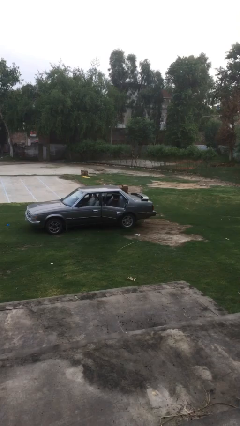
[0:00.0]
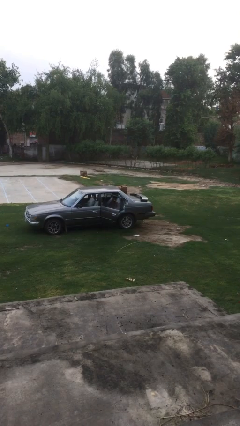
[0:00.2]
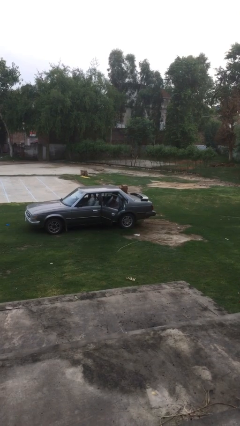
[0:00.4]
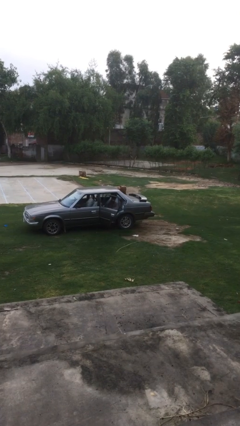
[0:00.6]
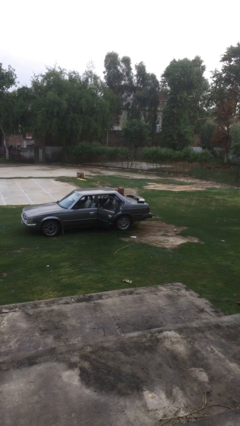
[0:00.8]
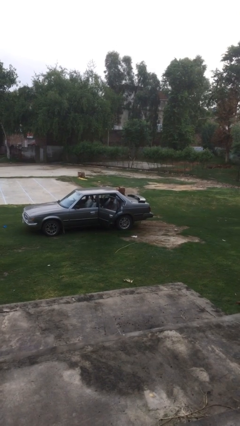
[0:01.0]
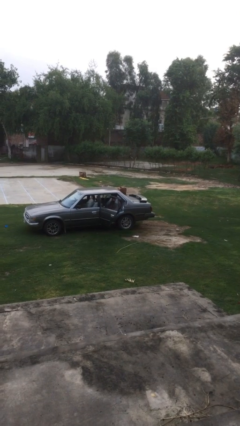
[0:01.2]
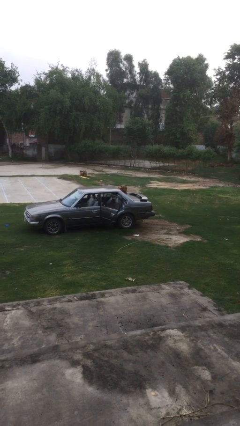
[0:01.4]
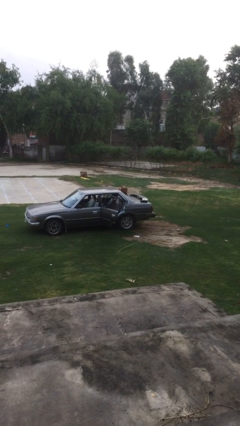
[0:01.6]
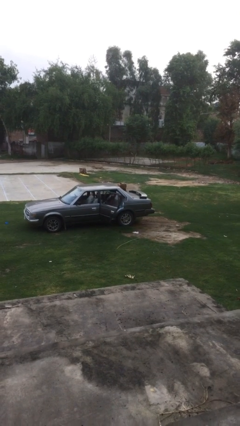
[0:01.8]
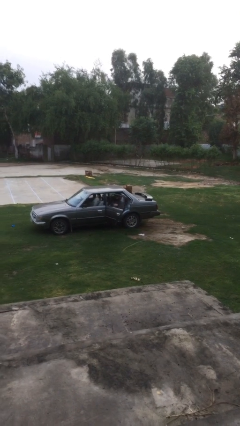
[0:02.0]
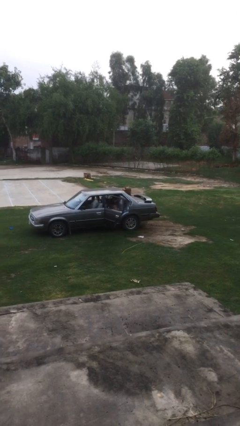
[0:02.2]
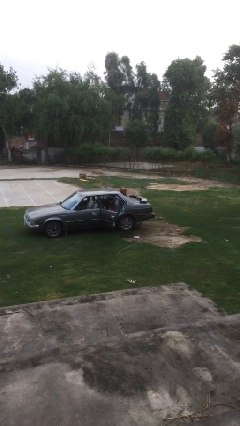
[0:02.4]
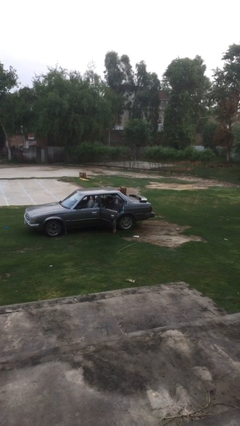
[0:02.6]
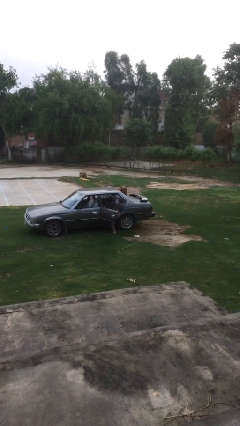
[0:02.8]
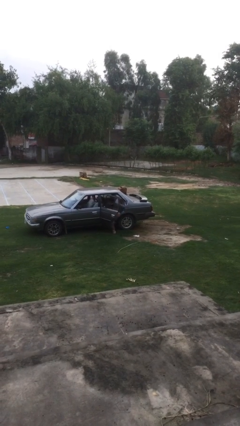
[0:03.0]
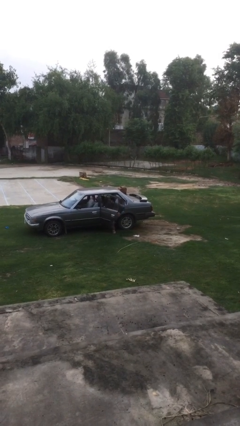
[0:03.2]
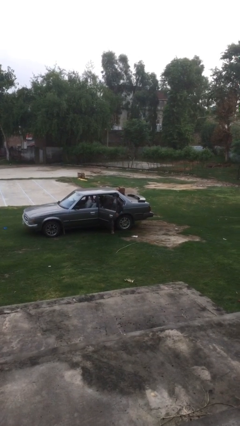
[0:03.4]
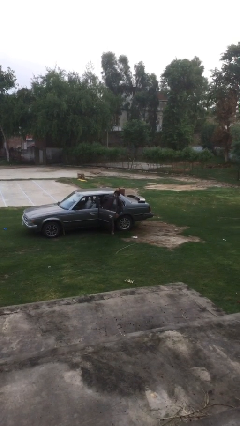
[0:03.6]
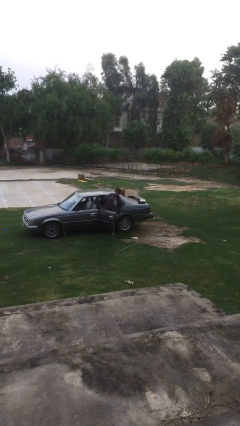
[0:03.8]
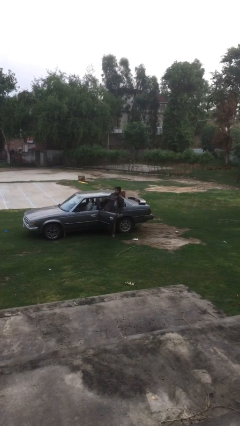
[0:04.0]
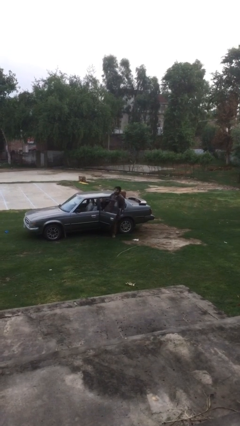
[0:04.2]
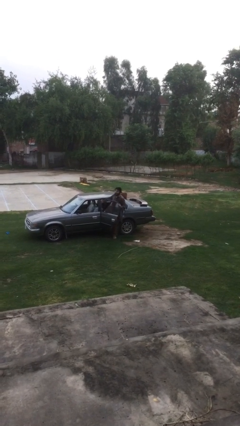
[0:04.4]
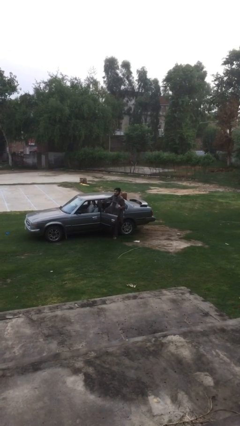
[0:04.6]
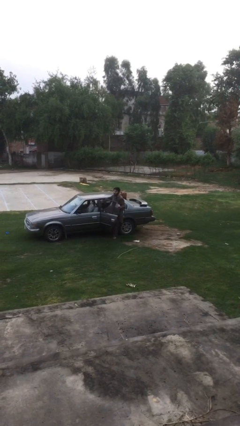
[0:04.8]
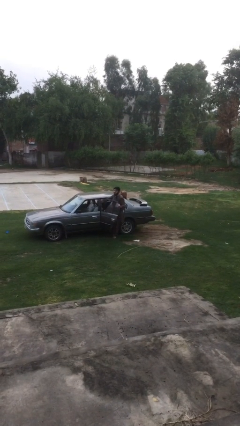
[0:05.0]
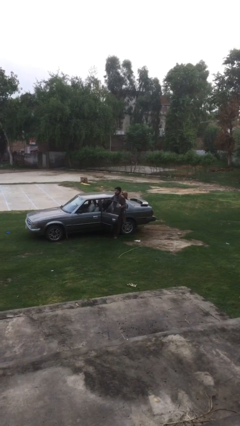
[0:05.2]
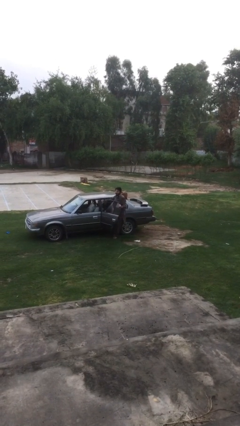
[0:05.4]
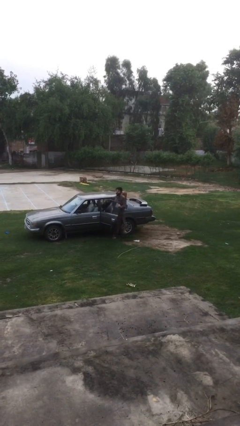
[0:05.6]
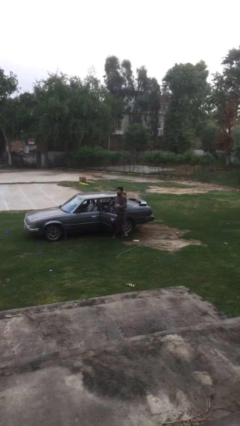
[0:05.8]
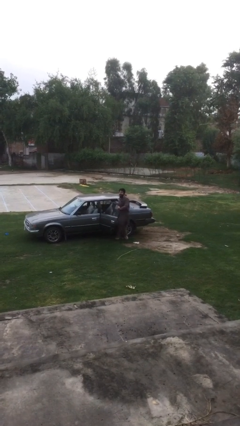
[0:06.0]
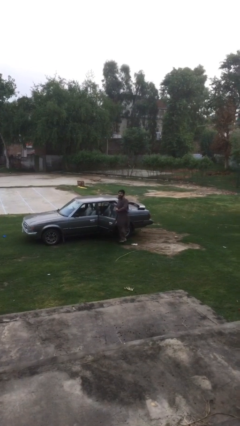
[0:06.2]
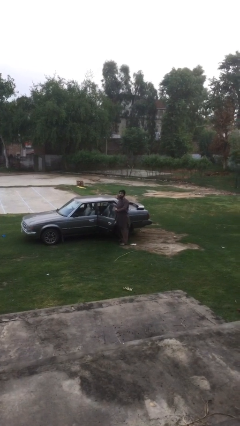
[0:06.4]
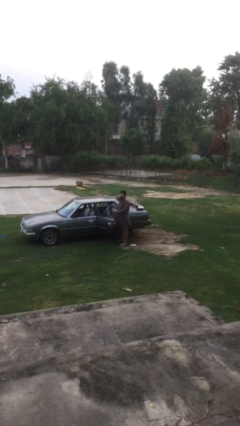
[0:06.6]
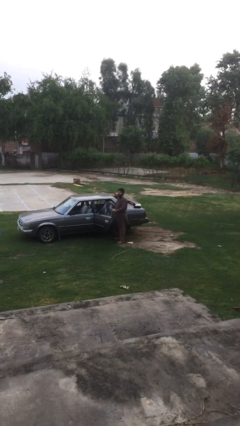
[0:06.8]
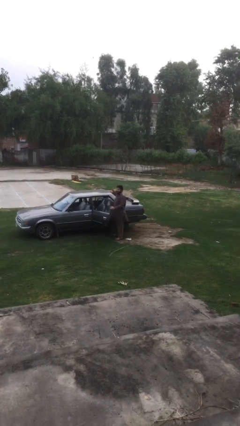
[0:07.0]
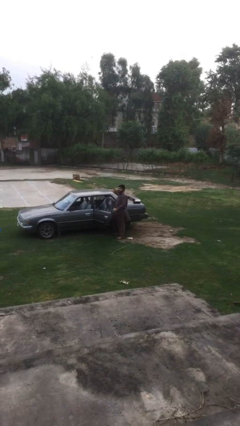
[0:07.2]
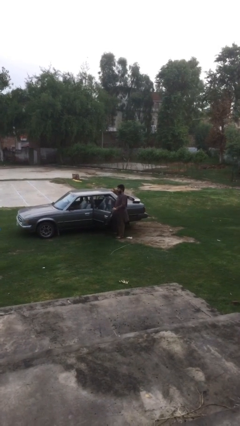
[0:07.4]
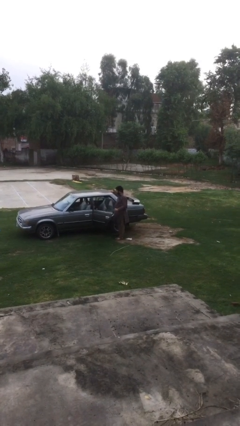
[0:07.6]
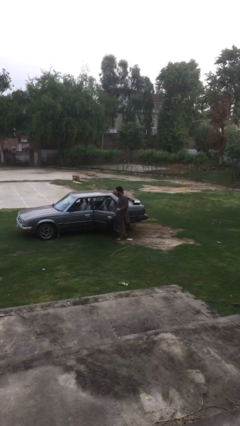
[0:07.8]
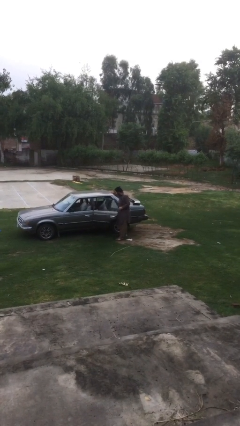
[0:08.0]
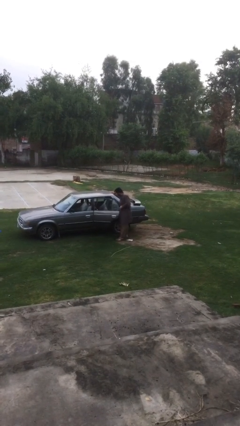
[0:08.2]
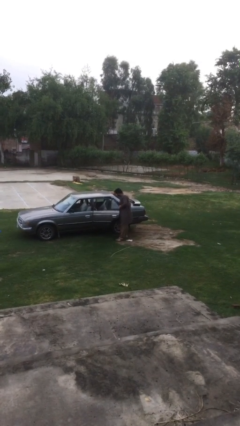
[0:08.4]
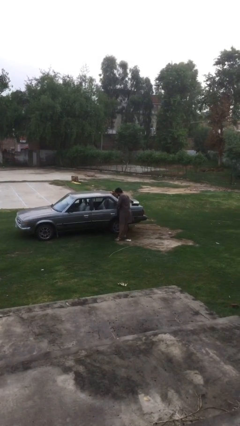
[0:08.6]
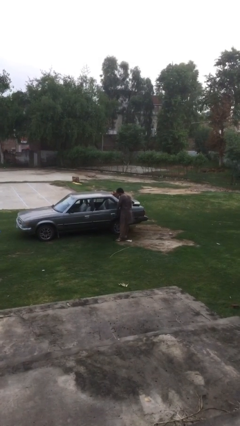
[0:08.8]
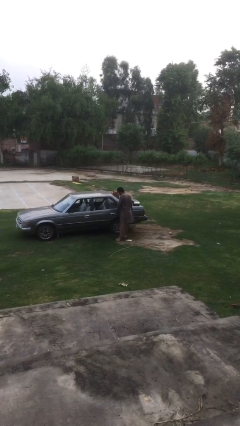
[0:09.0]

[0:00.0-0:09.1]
person exits car

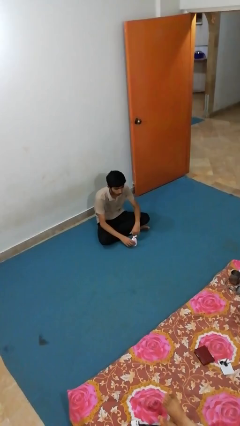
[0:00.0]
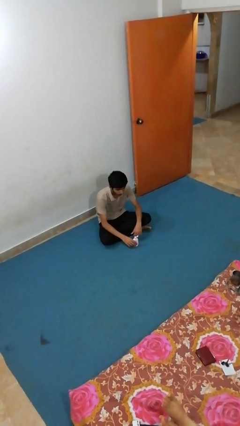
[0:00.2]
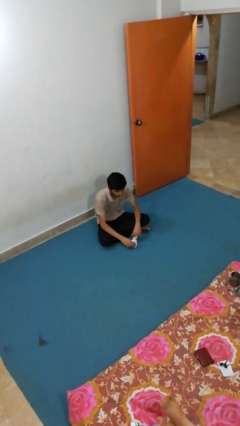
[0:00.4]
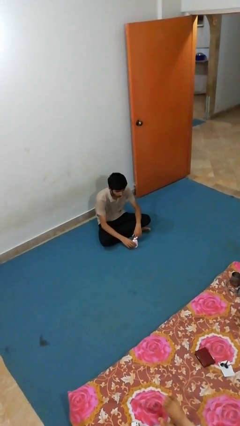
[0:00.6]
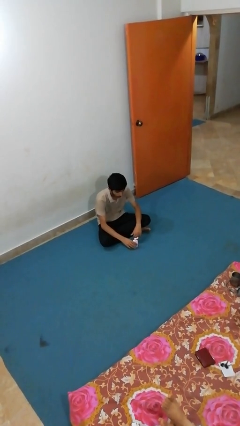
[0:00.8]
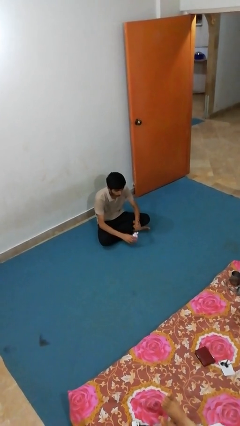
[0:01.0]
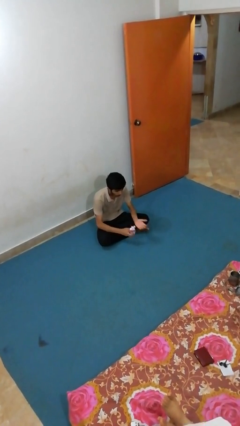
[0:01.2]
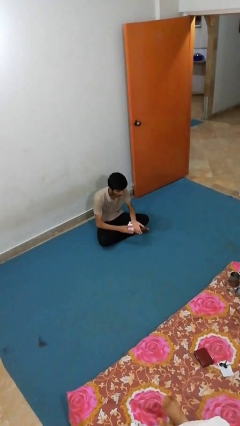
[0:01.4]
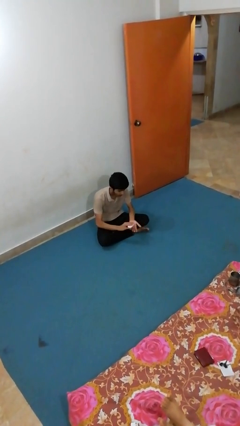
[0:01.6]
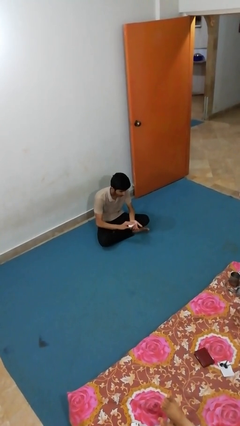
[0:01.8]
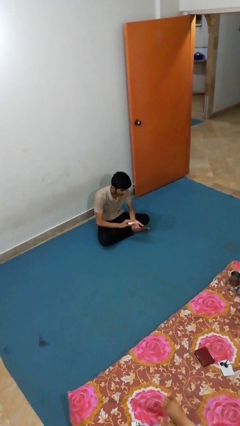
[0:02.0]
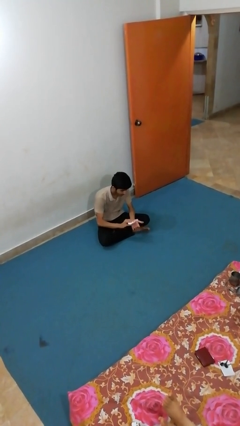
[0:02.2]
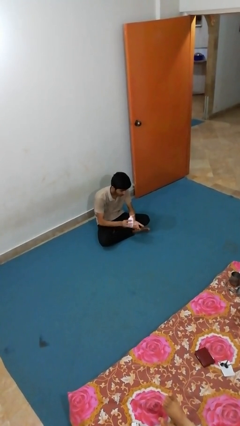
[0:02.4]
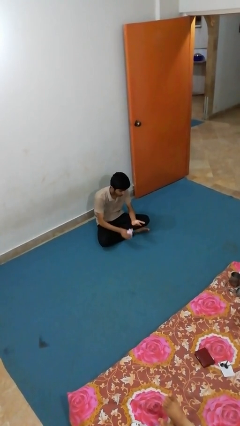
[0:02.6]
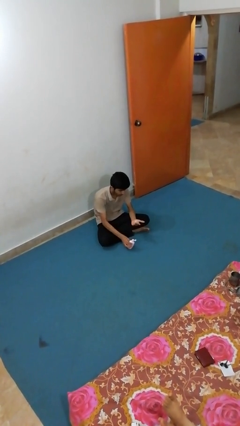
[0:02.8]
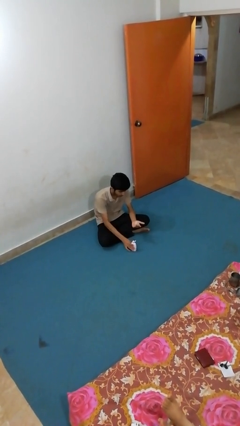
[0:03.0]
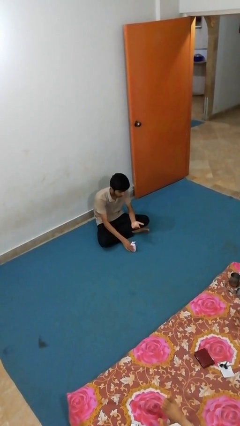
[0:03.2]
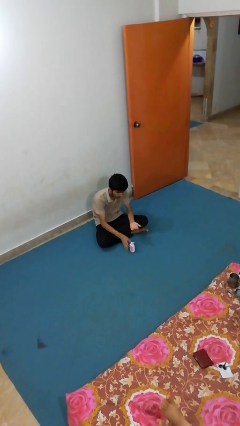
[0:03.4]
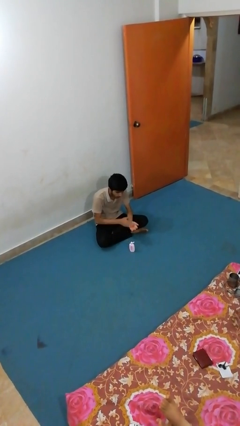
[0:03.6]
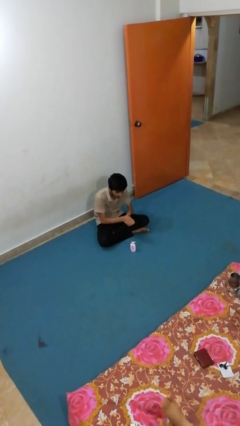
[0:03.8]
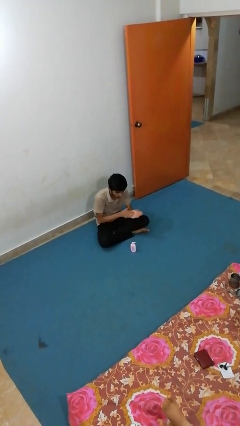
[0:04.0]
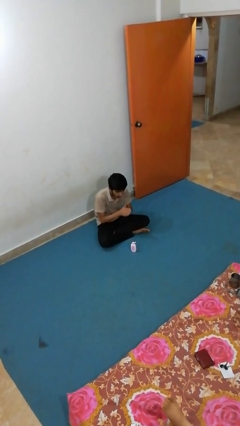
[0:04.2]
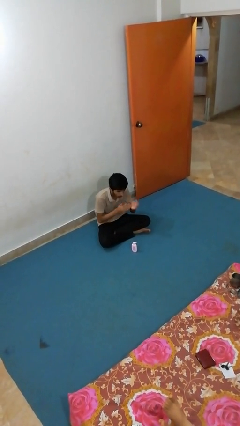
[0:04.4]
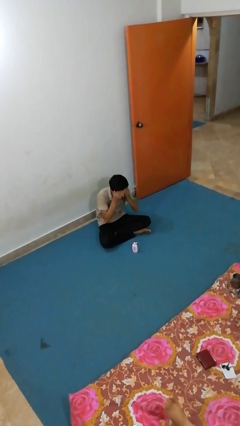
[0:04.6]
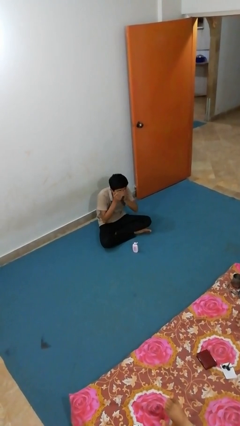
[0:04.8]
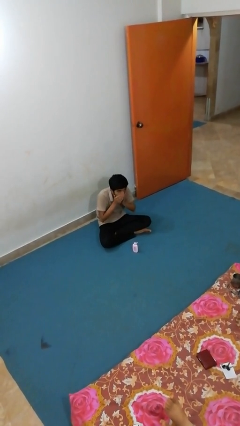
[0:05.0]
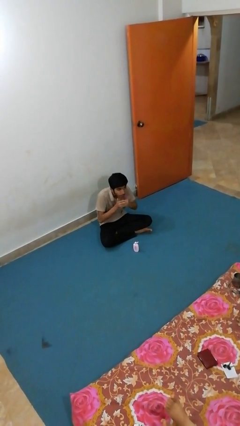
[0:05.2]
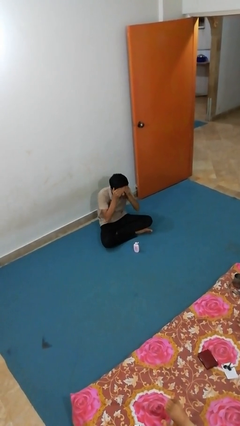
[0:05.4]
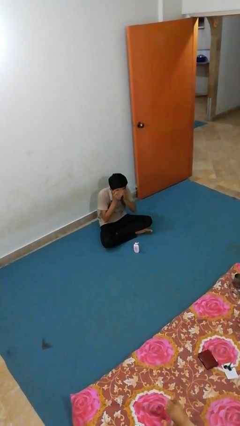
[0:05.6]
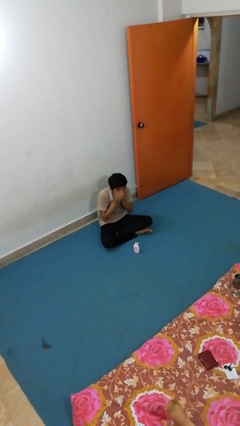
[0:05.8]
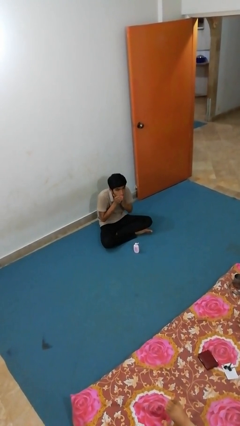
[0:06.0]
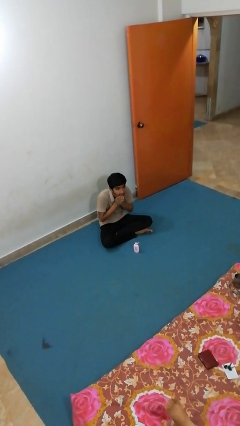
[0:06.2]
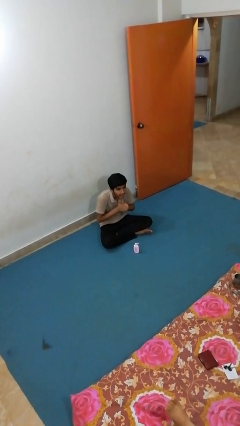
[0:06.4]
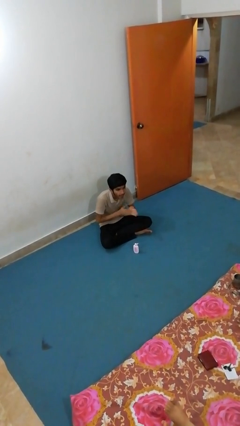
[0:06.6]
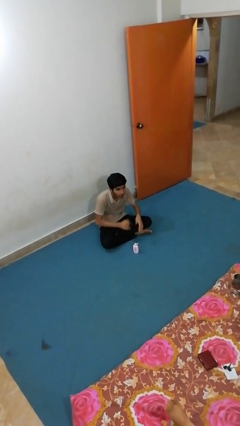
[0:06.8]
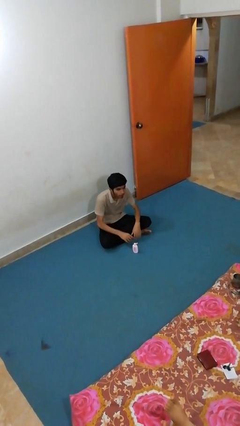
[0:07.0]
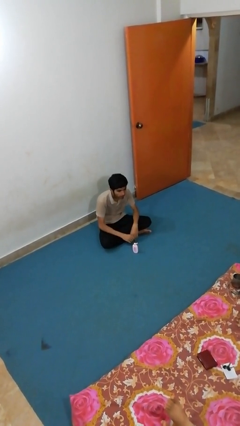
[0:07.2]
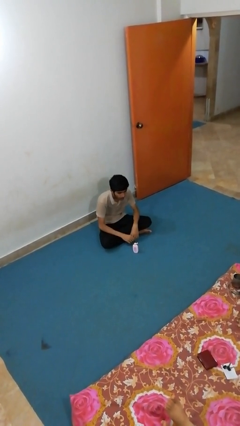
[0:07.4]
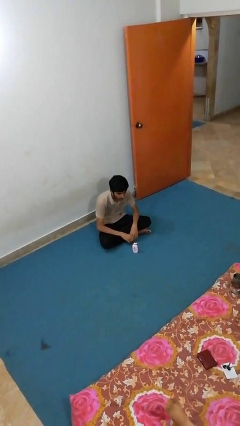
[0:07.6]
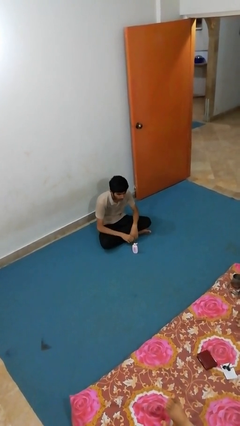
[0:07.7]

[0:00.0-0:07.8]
person applies sunscreen

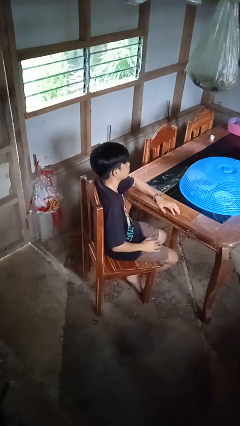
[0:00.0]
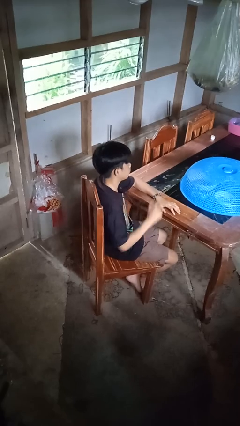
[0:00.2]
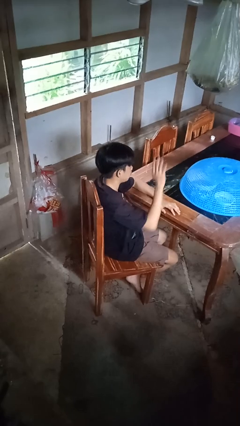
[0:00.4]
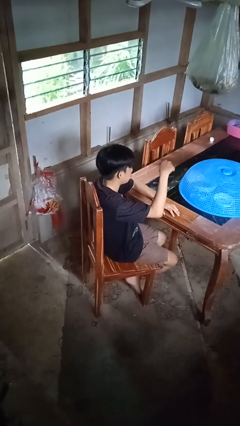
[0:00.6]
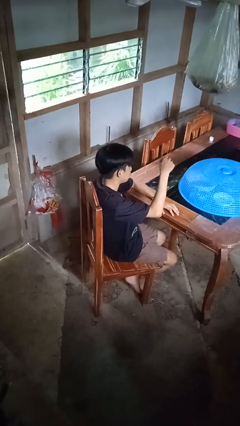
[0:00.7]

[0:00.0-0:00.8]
person gestures come here

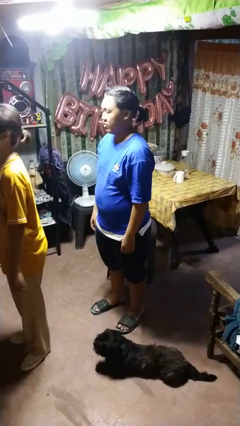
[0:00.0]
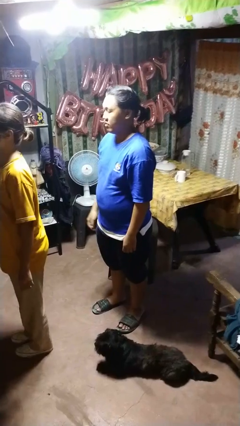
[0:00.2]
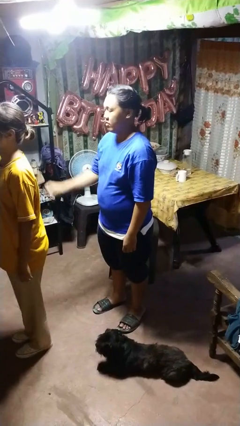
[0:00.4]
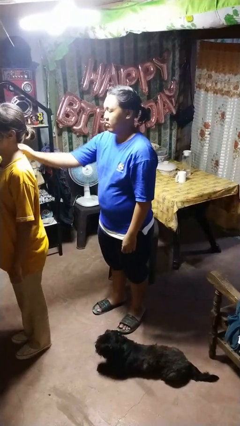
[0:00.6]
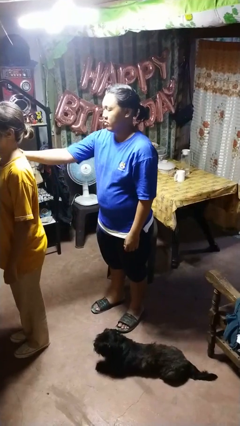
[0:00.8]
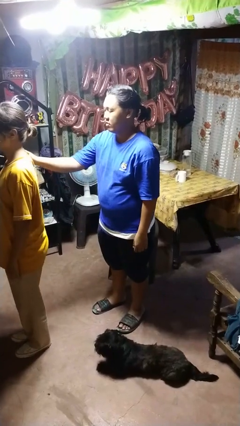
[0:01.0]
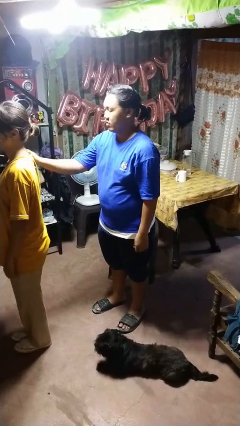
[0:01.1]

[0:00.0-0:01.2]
person grabs person by shoulder
